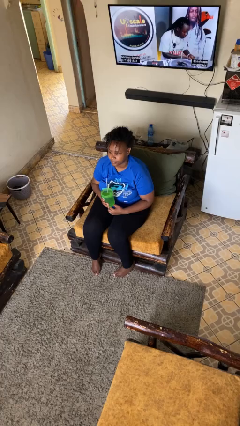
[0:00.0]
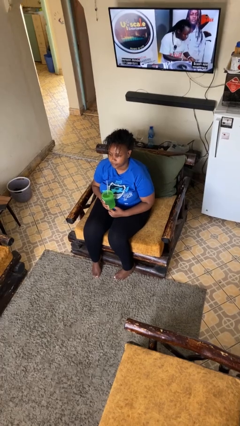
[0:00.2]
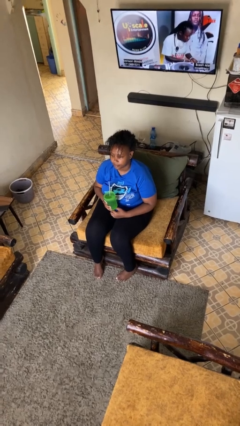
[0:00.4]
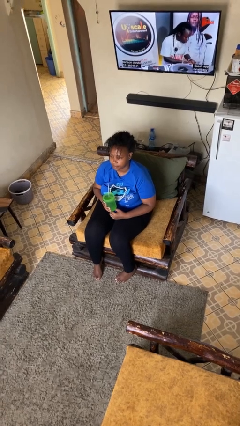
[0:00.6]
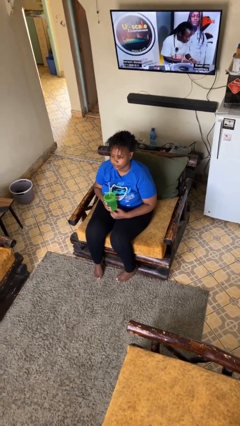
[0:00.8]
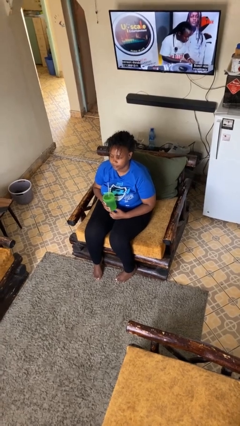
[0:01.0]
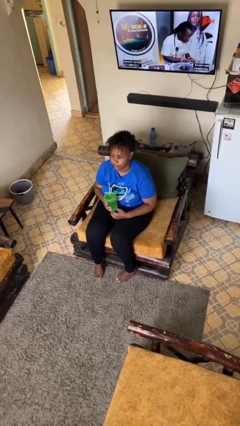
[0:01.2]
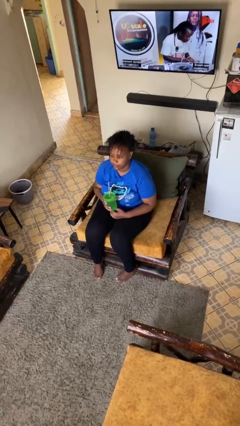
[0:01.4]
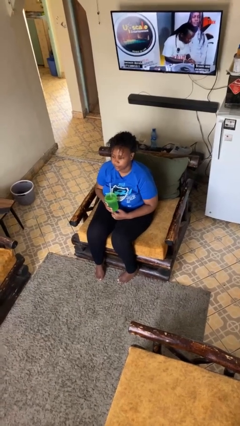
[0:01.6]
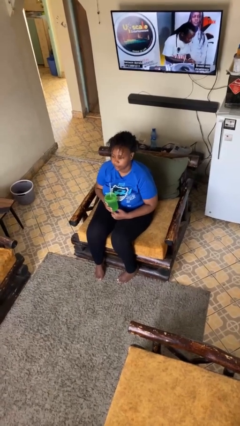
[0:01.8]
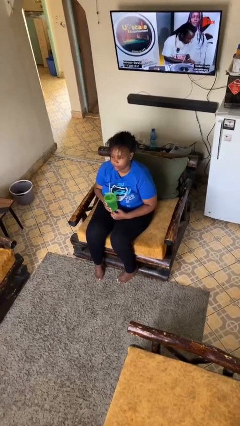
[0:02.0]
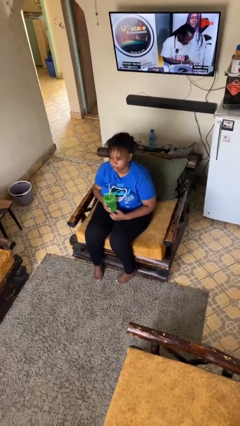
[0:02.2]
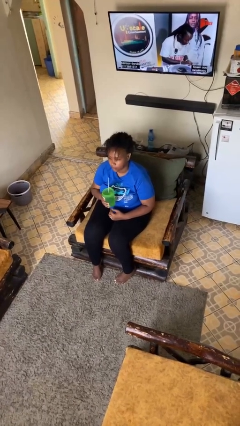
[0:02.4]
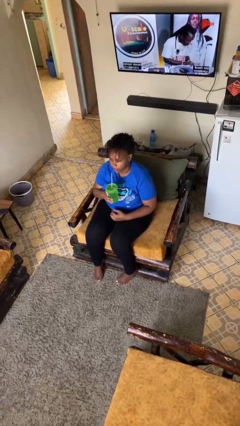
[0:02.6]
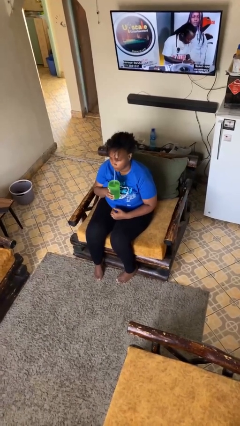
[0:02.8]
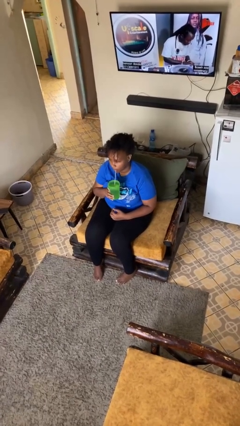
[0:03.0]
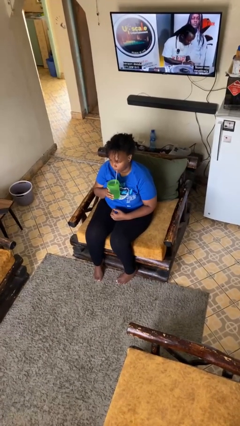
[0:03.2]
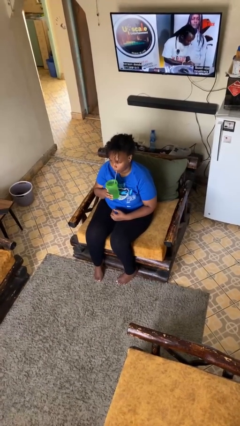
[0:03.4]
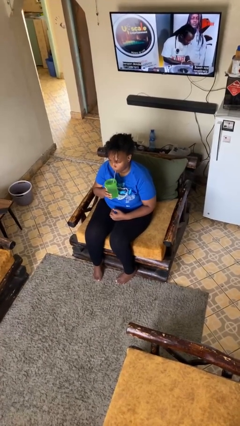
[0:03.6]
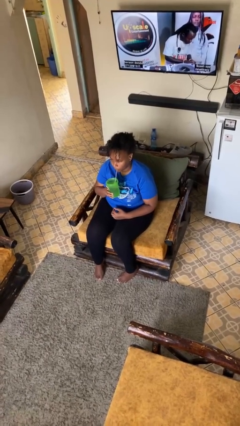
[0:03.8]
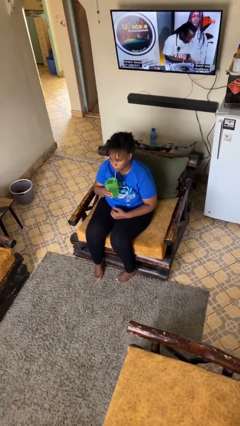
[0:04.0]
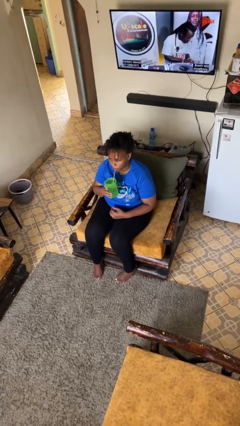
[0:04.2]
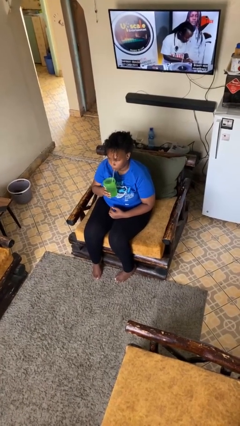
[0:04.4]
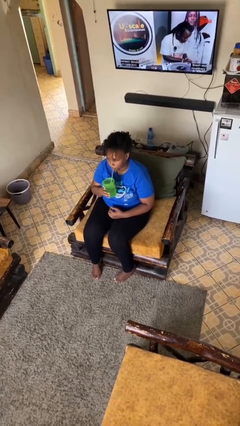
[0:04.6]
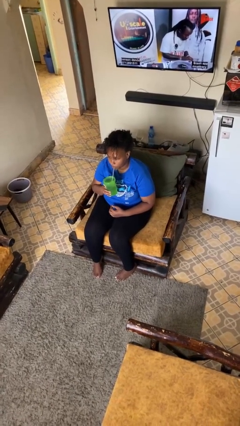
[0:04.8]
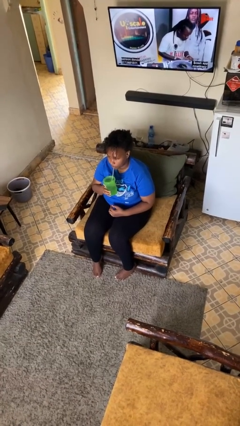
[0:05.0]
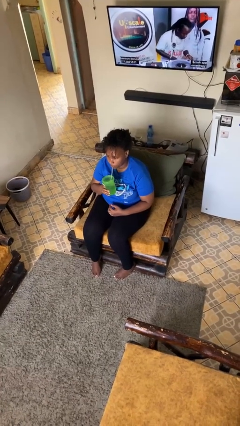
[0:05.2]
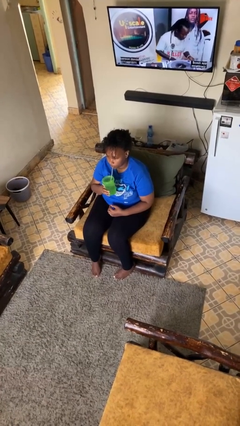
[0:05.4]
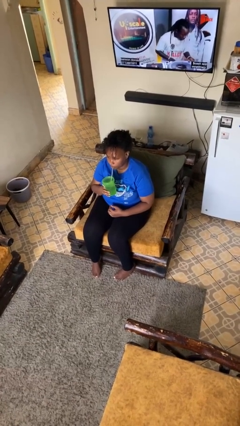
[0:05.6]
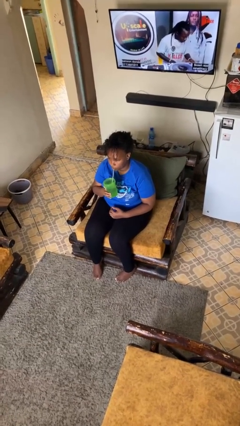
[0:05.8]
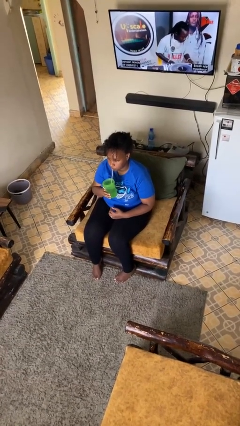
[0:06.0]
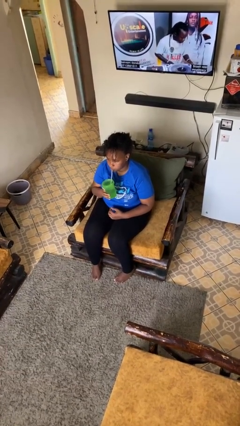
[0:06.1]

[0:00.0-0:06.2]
person drinks from straw

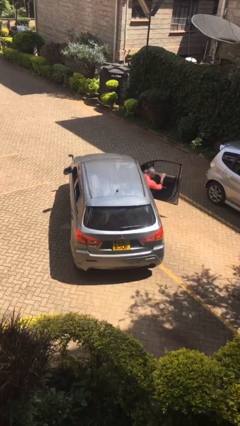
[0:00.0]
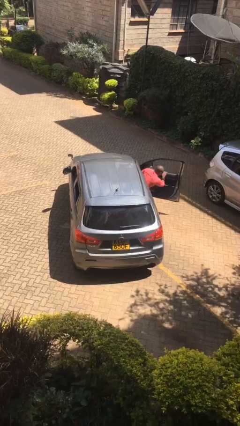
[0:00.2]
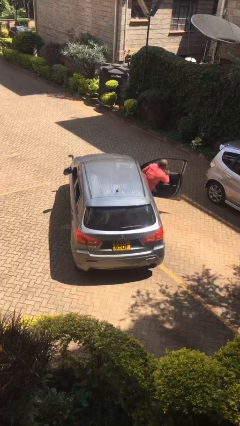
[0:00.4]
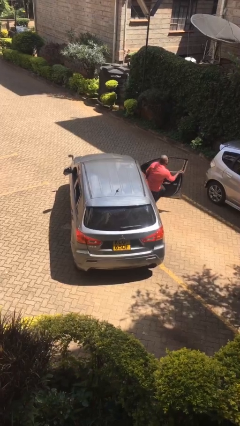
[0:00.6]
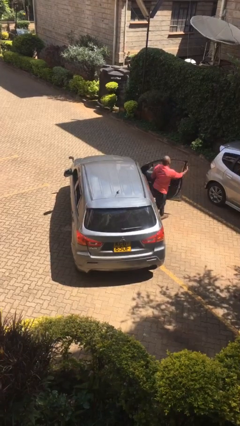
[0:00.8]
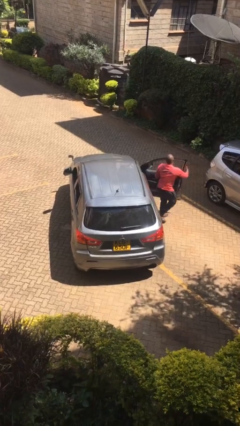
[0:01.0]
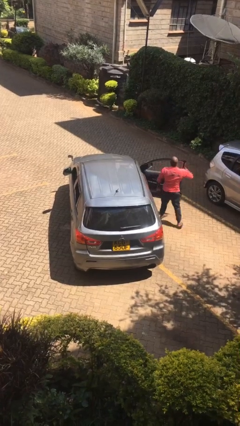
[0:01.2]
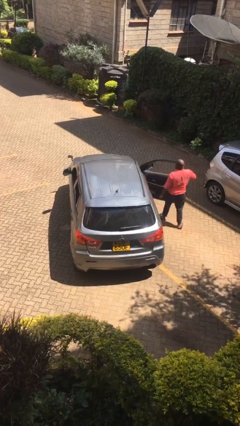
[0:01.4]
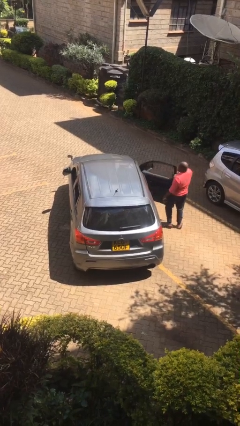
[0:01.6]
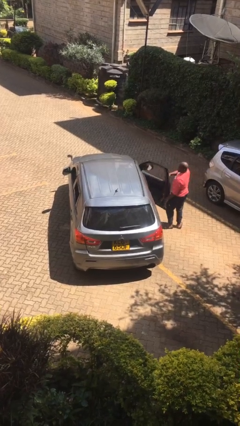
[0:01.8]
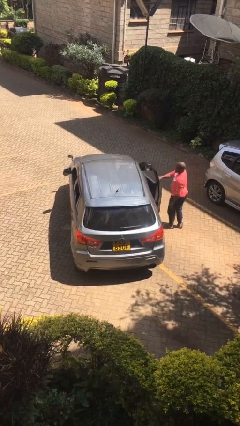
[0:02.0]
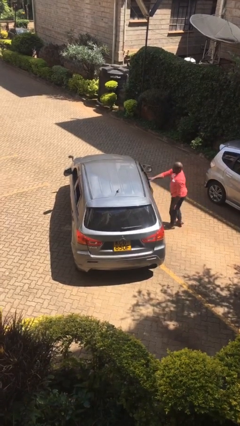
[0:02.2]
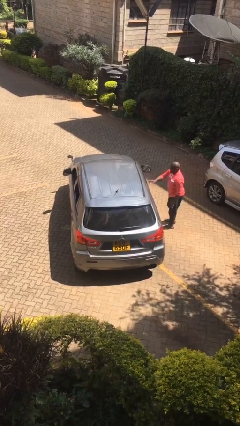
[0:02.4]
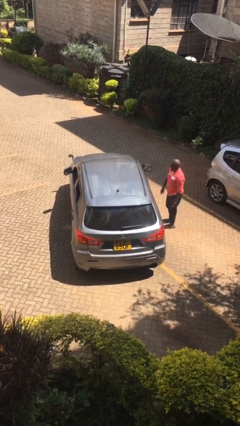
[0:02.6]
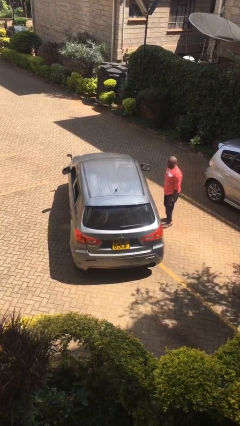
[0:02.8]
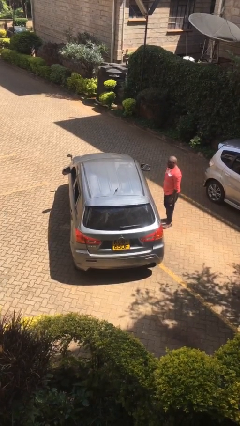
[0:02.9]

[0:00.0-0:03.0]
car drops off person

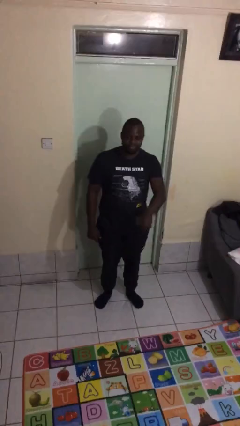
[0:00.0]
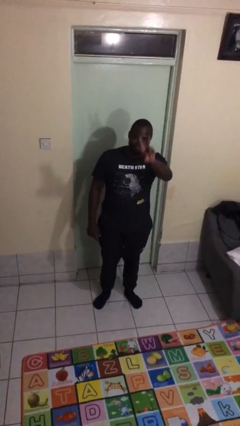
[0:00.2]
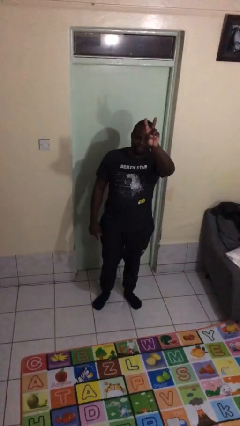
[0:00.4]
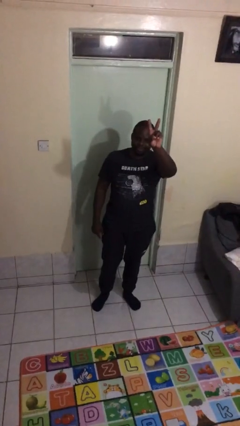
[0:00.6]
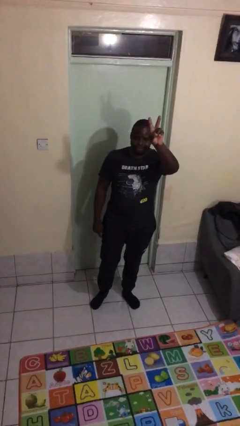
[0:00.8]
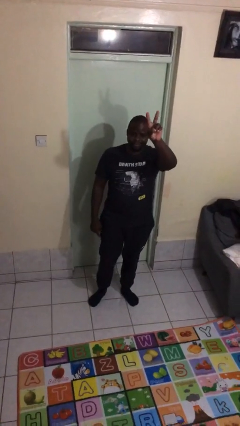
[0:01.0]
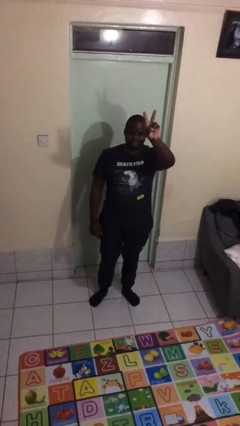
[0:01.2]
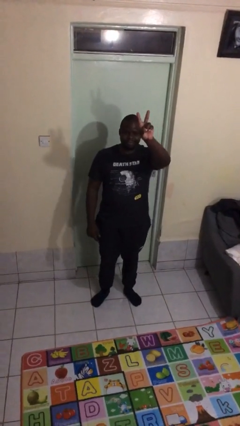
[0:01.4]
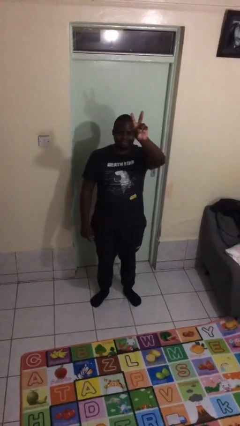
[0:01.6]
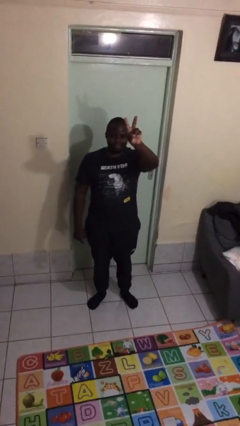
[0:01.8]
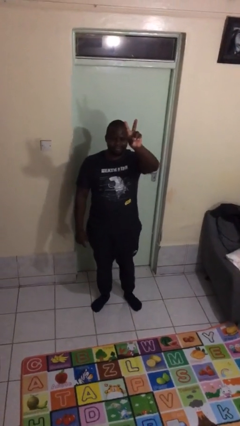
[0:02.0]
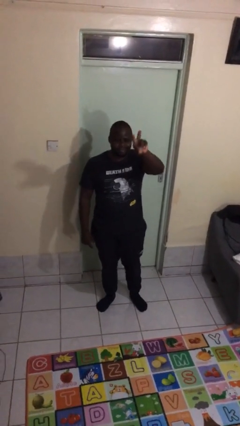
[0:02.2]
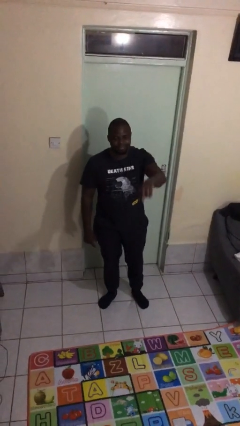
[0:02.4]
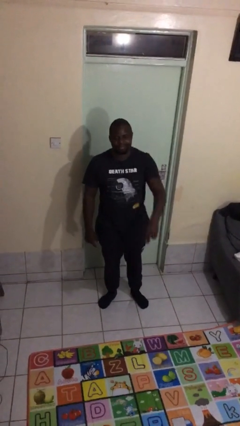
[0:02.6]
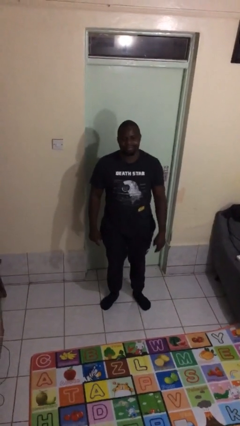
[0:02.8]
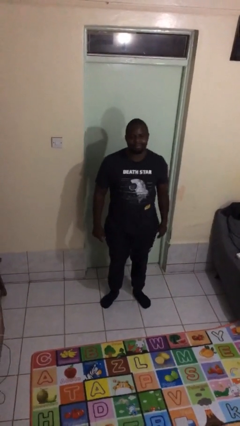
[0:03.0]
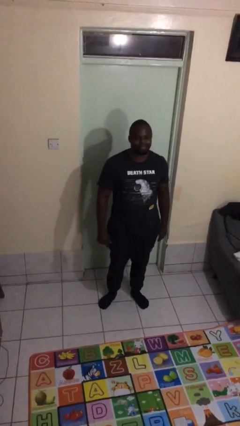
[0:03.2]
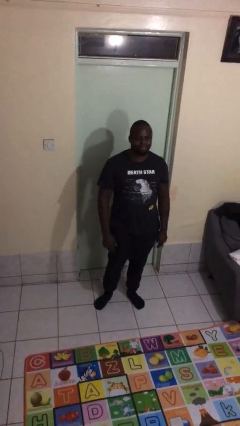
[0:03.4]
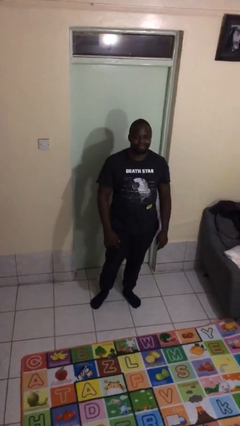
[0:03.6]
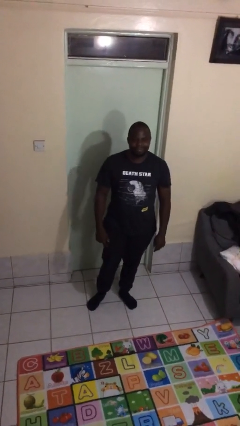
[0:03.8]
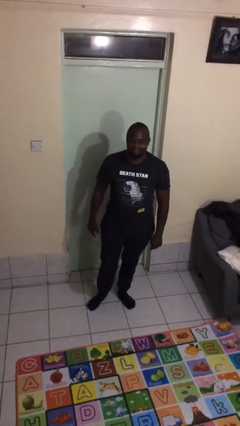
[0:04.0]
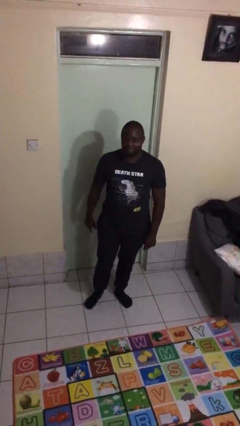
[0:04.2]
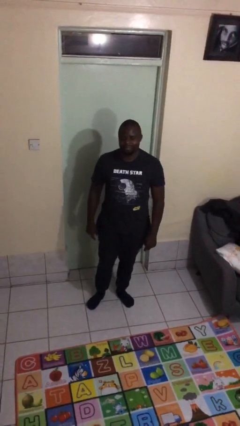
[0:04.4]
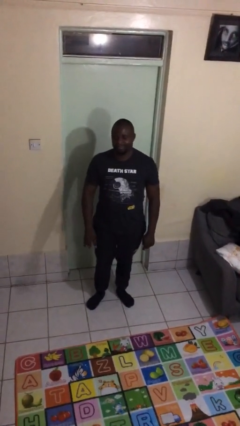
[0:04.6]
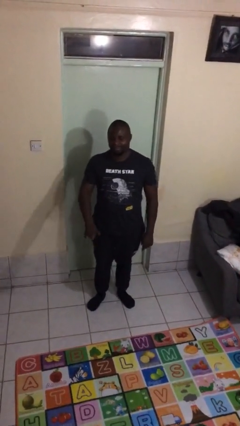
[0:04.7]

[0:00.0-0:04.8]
person gestures peace

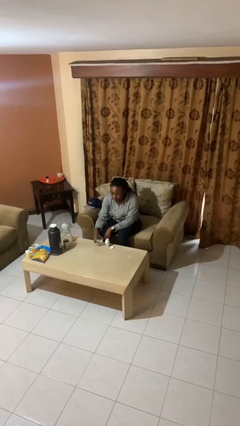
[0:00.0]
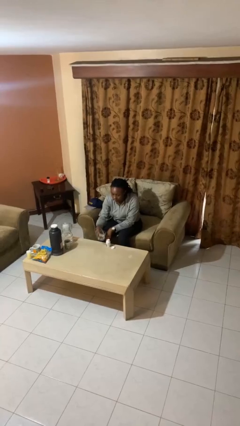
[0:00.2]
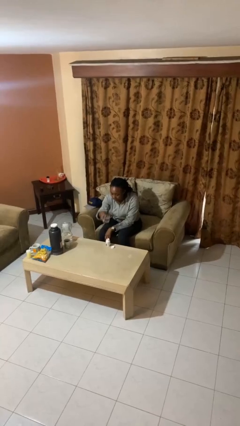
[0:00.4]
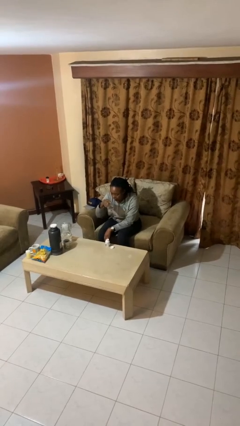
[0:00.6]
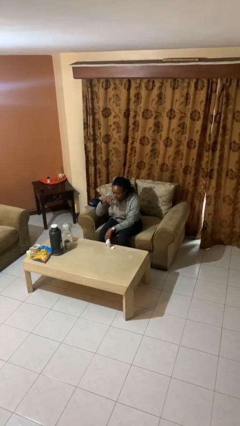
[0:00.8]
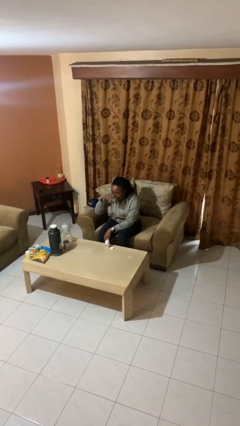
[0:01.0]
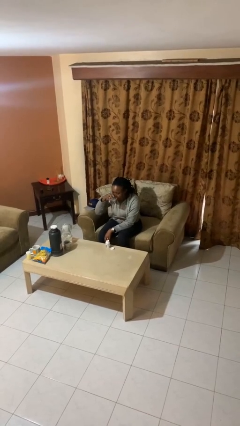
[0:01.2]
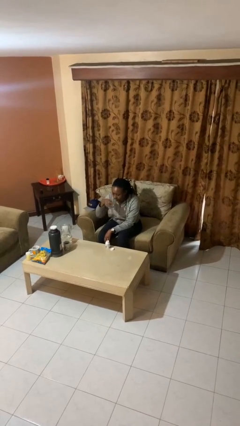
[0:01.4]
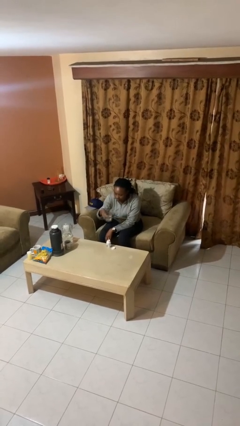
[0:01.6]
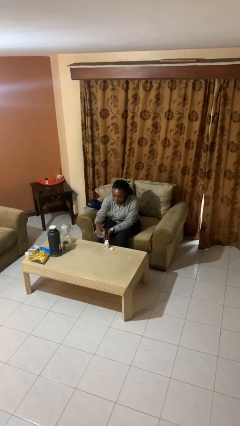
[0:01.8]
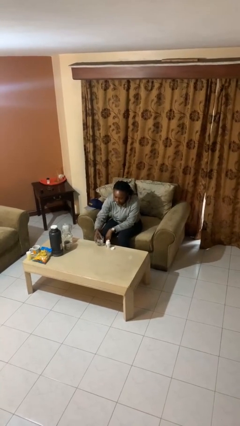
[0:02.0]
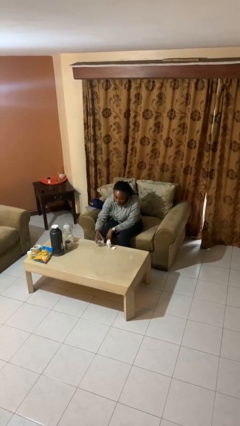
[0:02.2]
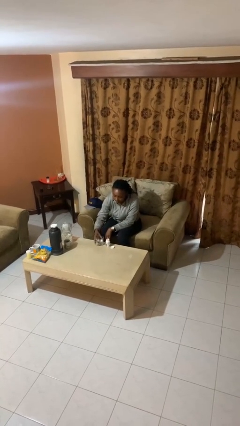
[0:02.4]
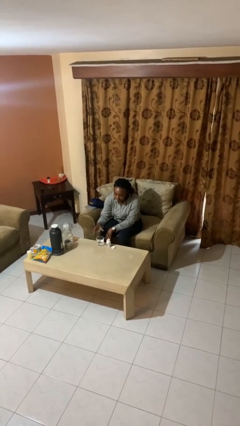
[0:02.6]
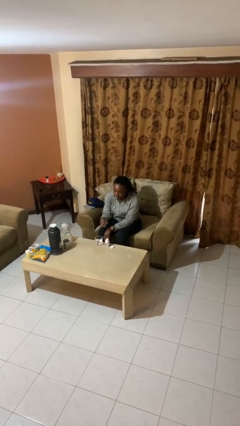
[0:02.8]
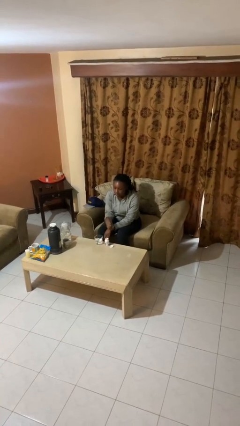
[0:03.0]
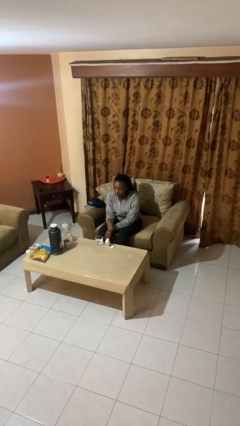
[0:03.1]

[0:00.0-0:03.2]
person drinks from cup

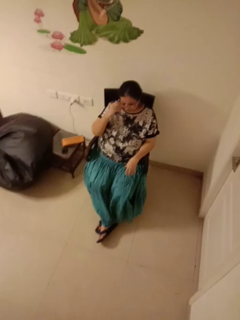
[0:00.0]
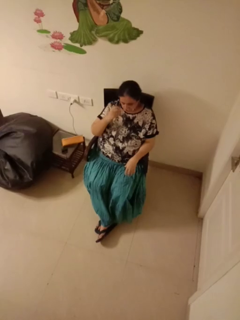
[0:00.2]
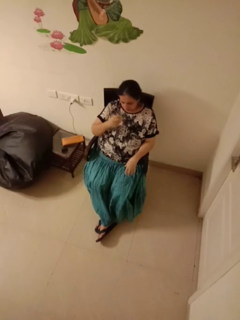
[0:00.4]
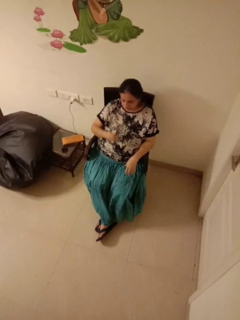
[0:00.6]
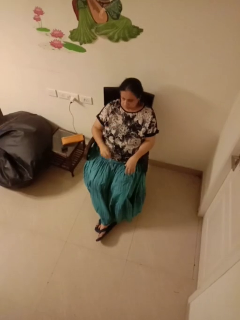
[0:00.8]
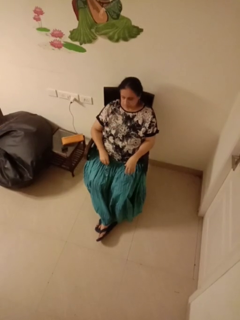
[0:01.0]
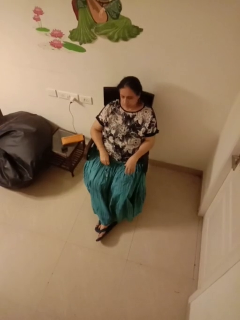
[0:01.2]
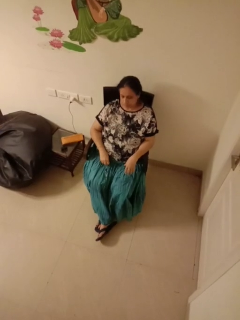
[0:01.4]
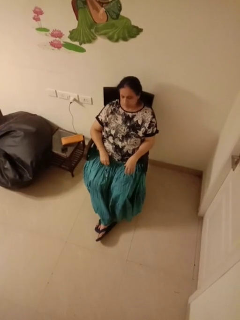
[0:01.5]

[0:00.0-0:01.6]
person takes off glasses
